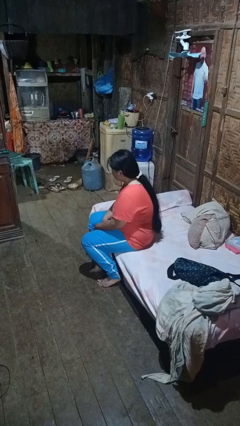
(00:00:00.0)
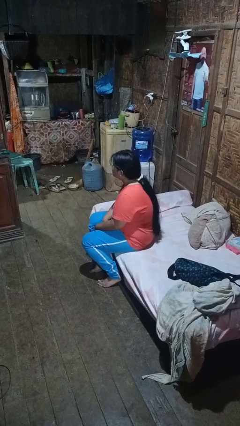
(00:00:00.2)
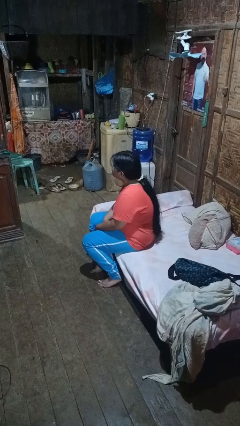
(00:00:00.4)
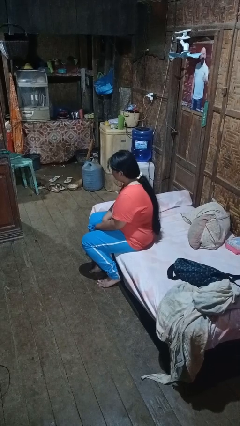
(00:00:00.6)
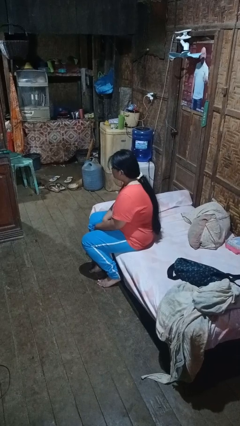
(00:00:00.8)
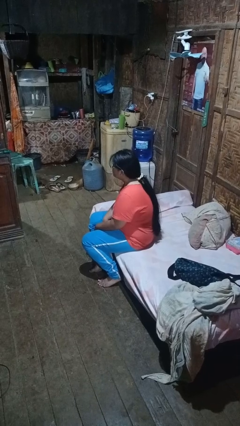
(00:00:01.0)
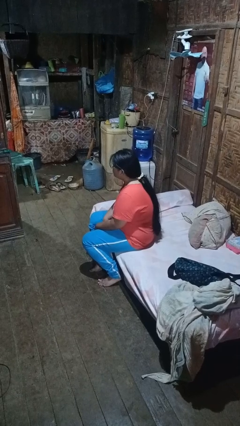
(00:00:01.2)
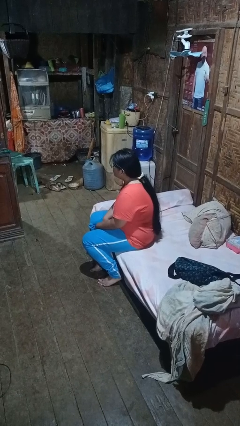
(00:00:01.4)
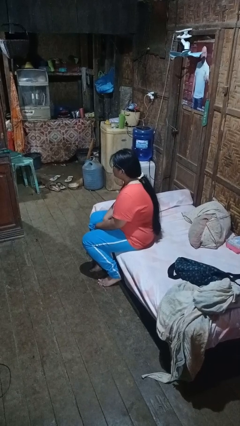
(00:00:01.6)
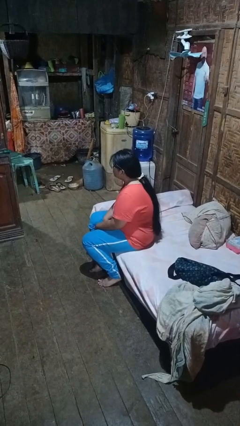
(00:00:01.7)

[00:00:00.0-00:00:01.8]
person nods head

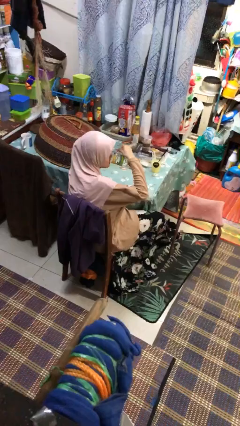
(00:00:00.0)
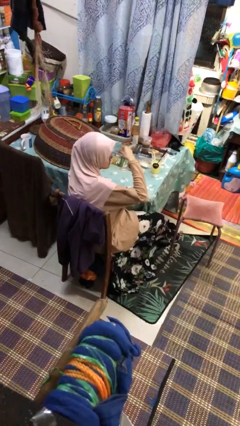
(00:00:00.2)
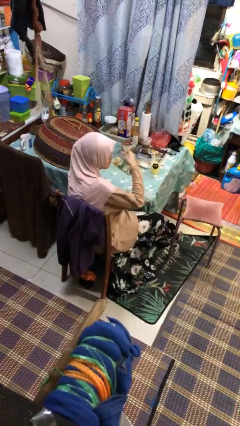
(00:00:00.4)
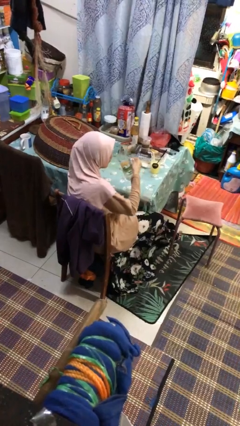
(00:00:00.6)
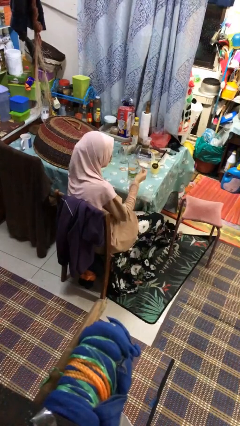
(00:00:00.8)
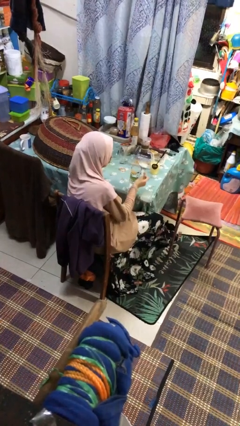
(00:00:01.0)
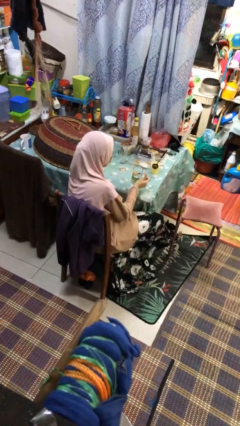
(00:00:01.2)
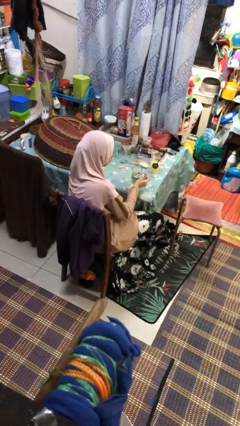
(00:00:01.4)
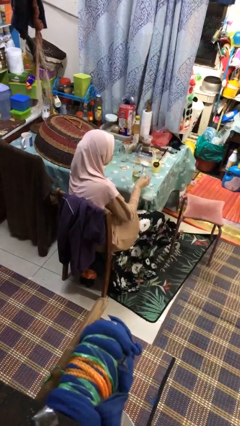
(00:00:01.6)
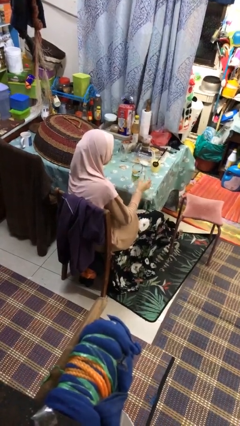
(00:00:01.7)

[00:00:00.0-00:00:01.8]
person puts down object on table

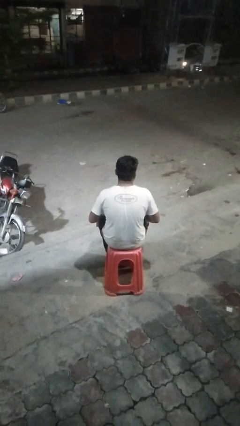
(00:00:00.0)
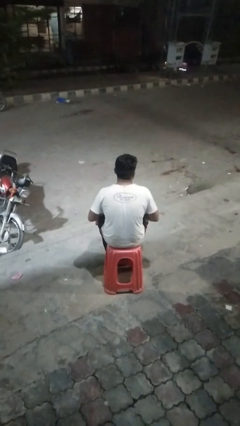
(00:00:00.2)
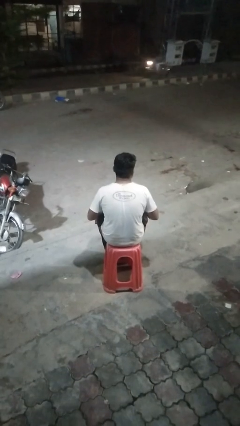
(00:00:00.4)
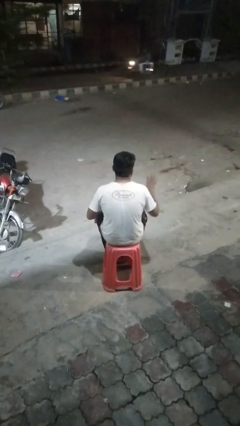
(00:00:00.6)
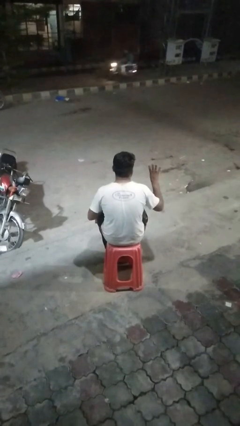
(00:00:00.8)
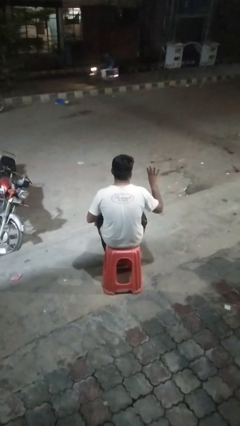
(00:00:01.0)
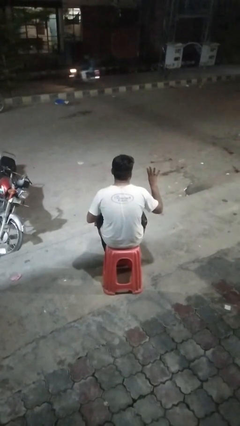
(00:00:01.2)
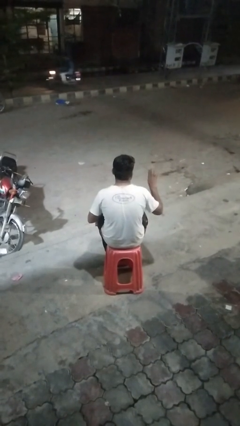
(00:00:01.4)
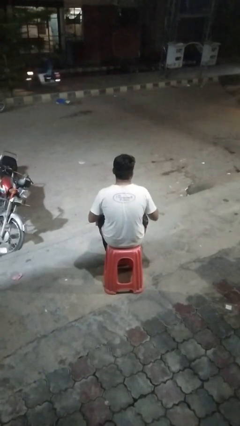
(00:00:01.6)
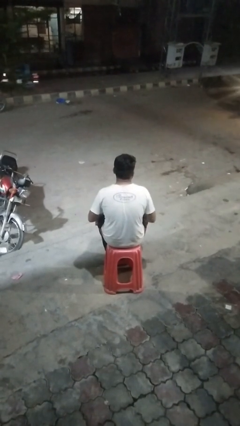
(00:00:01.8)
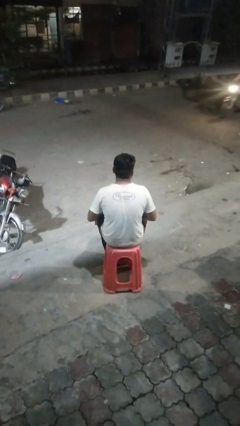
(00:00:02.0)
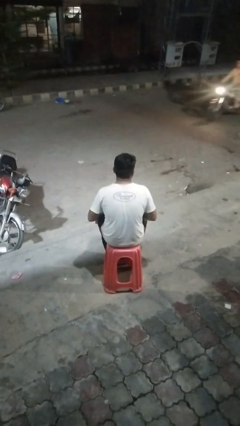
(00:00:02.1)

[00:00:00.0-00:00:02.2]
person gestures number four

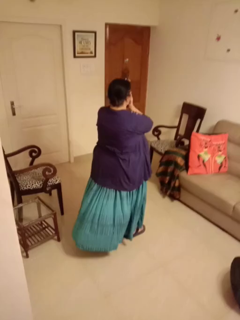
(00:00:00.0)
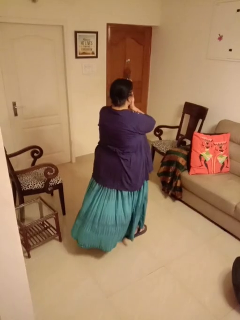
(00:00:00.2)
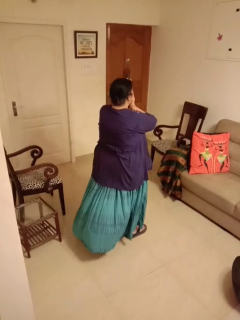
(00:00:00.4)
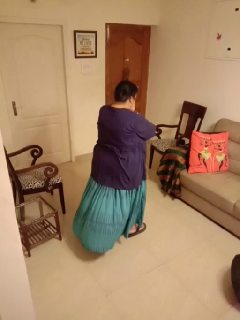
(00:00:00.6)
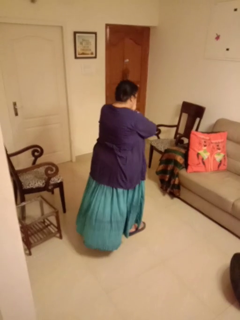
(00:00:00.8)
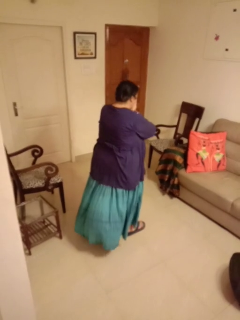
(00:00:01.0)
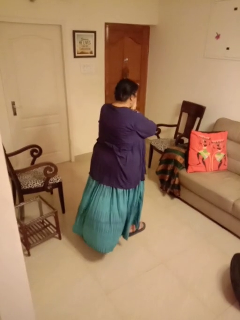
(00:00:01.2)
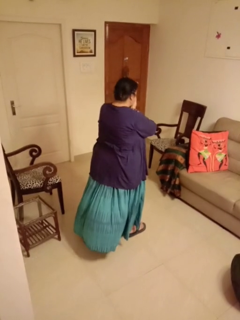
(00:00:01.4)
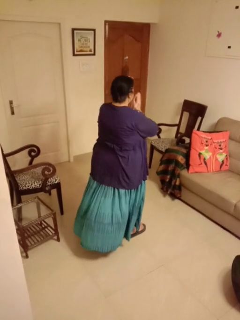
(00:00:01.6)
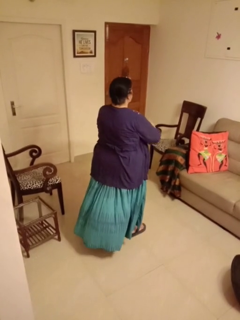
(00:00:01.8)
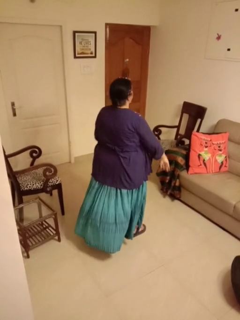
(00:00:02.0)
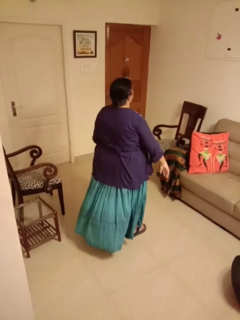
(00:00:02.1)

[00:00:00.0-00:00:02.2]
person sneezes into hand

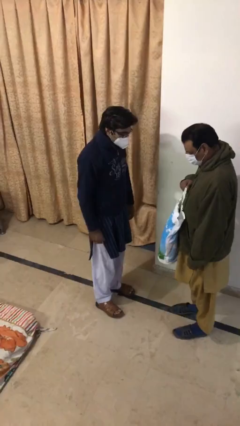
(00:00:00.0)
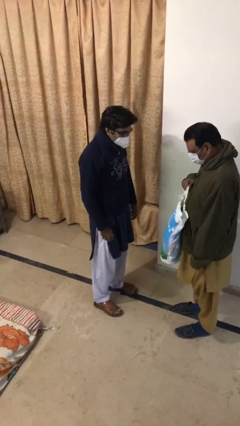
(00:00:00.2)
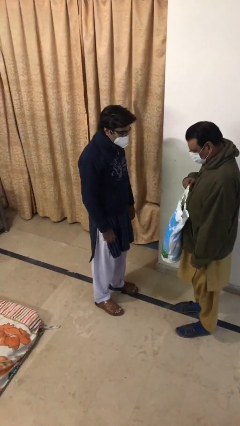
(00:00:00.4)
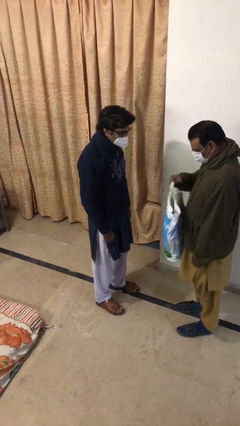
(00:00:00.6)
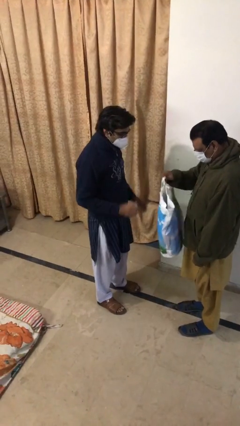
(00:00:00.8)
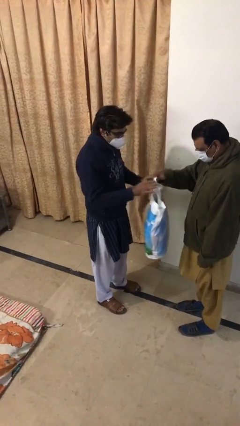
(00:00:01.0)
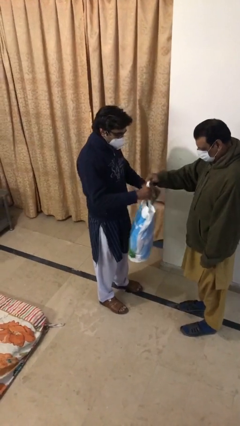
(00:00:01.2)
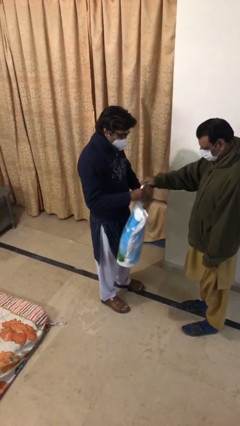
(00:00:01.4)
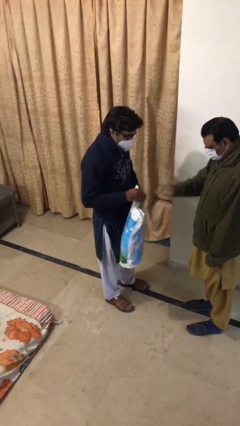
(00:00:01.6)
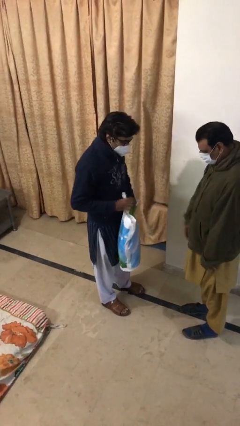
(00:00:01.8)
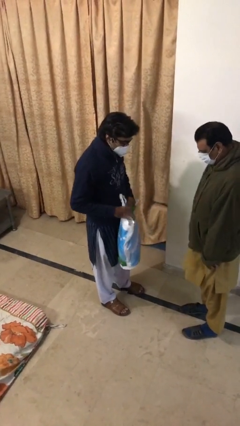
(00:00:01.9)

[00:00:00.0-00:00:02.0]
person transfers object to person

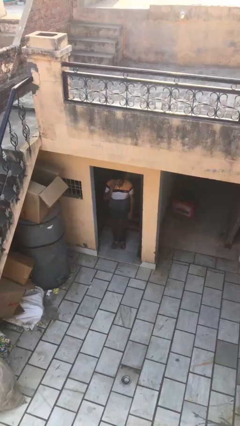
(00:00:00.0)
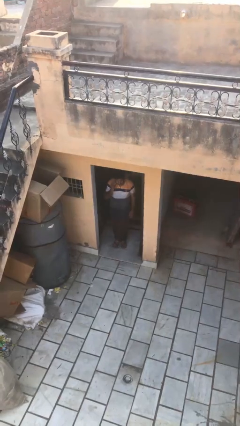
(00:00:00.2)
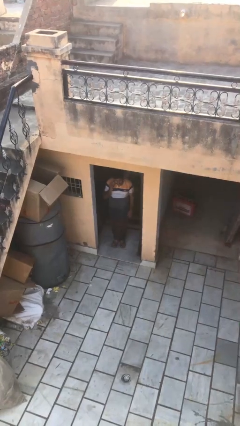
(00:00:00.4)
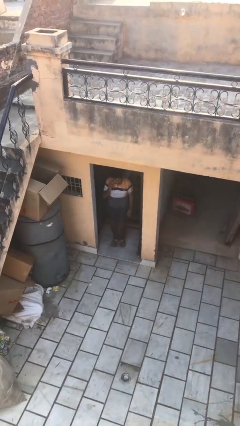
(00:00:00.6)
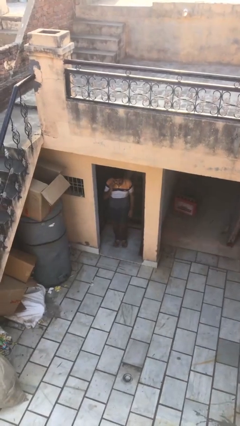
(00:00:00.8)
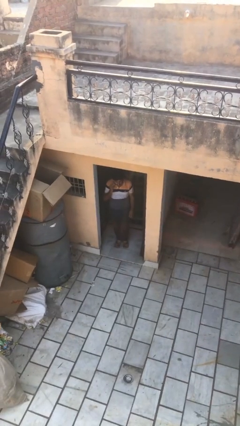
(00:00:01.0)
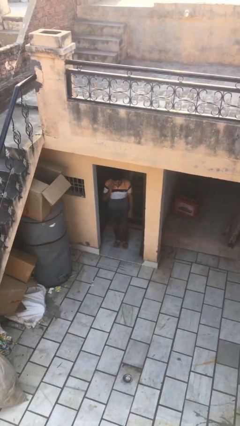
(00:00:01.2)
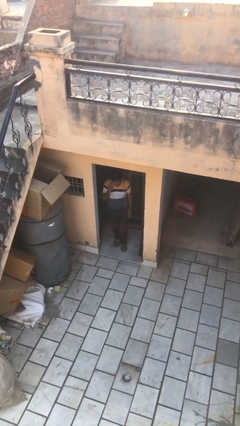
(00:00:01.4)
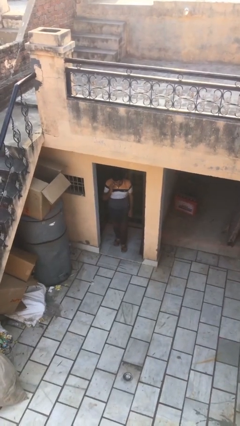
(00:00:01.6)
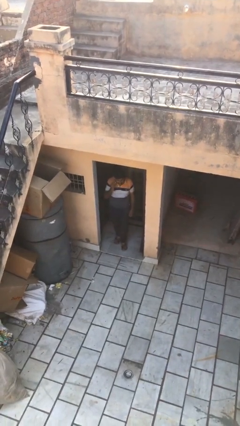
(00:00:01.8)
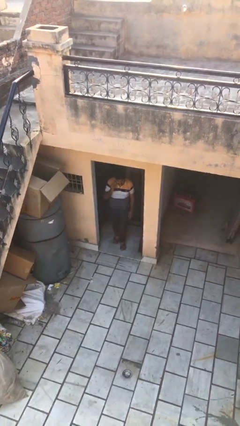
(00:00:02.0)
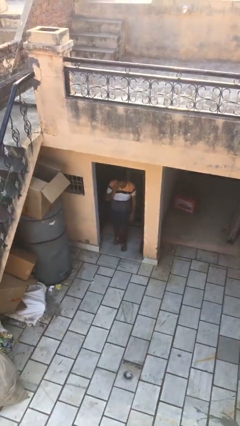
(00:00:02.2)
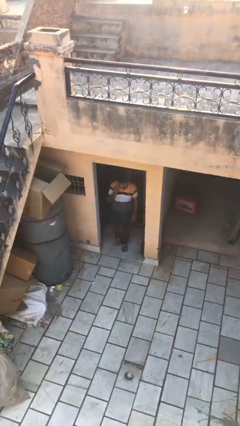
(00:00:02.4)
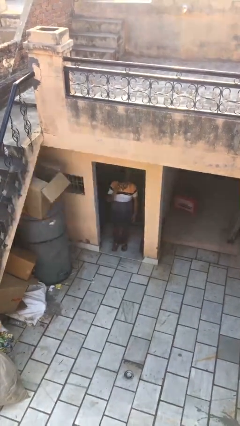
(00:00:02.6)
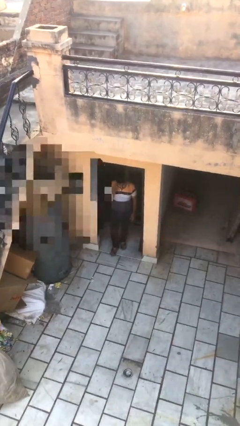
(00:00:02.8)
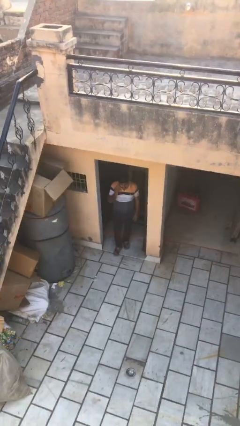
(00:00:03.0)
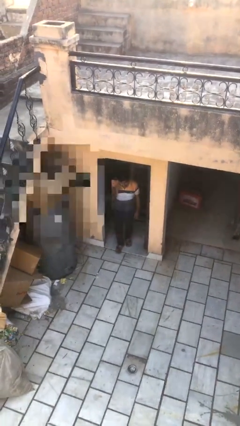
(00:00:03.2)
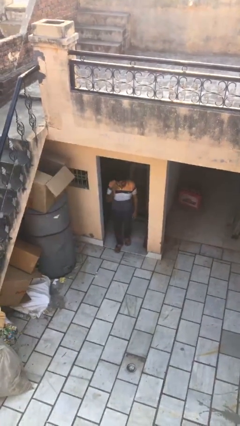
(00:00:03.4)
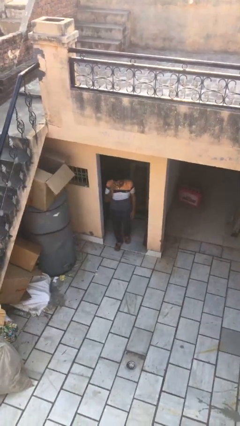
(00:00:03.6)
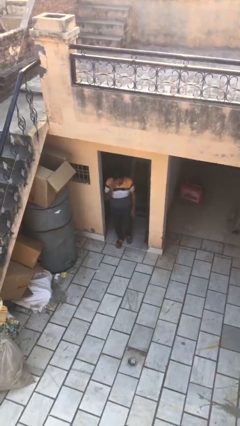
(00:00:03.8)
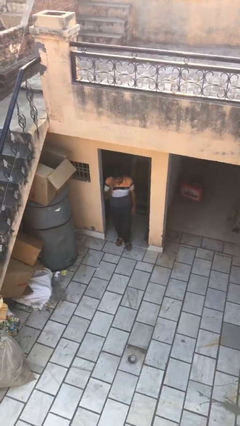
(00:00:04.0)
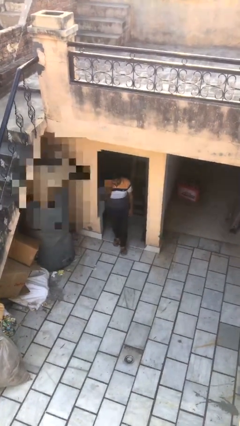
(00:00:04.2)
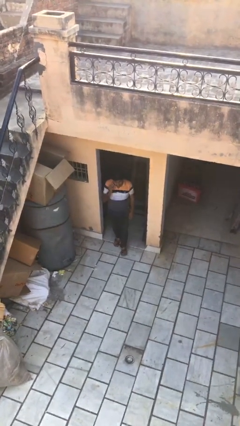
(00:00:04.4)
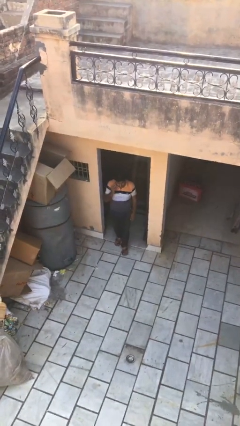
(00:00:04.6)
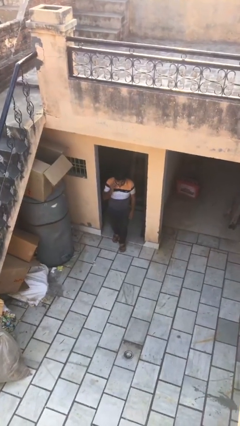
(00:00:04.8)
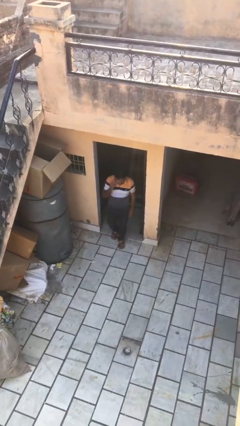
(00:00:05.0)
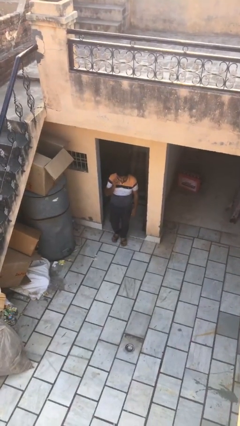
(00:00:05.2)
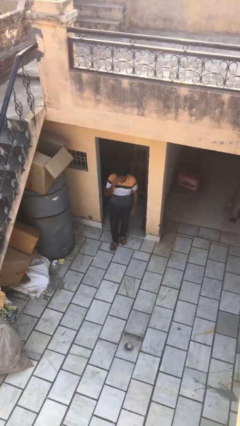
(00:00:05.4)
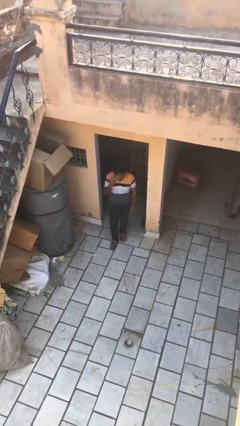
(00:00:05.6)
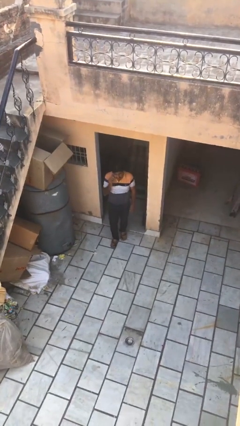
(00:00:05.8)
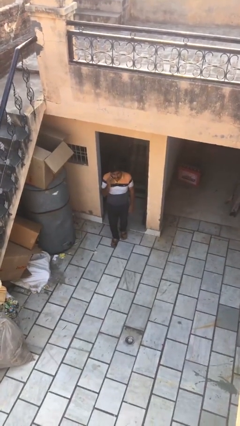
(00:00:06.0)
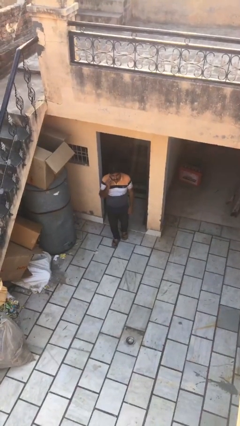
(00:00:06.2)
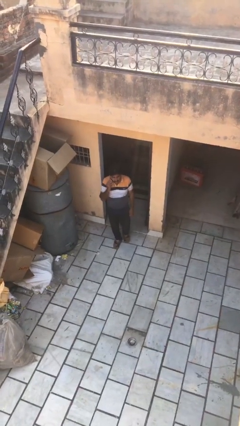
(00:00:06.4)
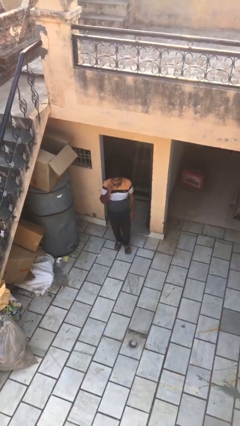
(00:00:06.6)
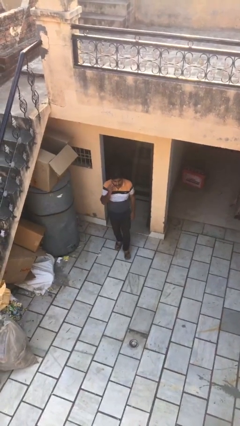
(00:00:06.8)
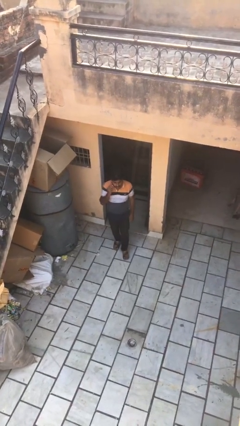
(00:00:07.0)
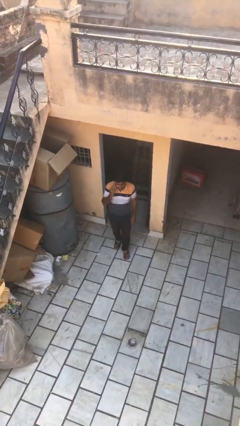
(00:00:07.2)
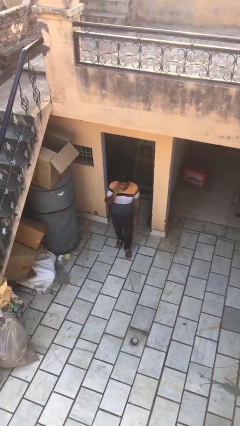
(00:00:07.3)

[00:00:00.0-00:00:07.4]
person enters scene through structure
